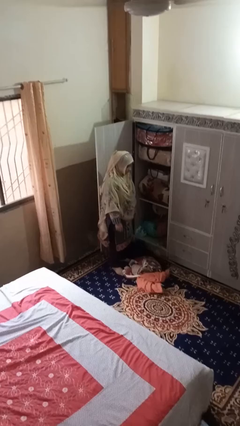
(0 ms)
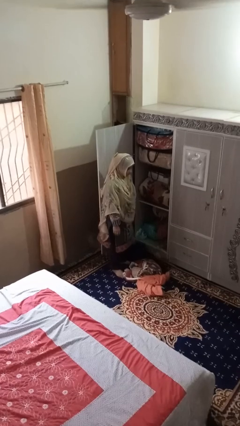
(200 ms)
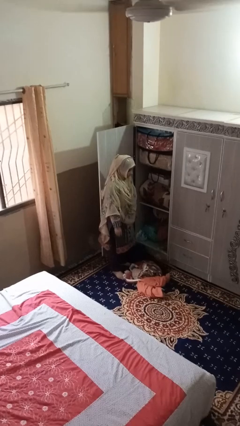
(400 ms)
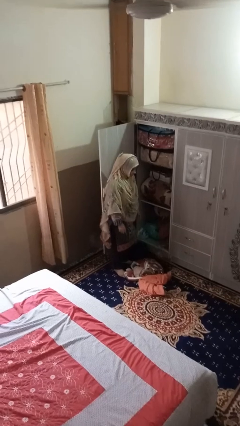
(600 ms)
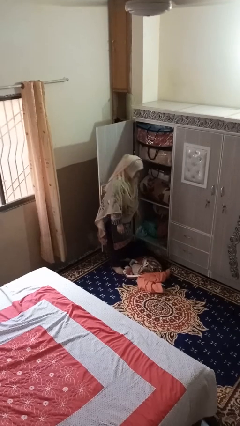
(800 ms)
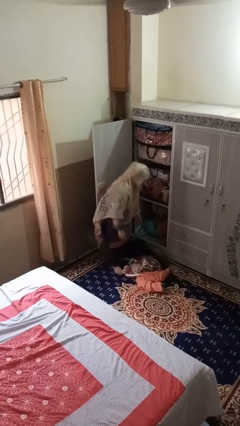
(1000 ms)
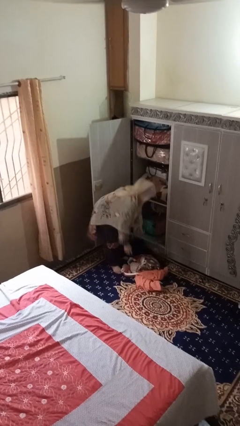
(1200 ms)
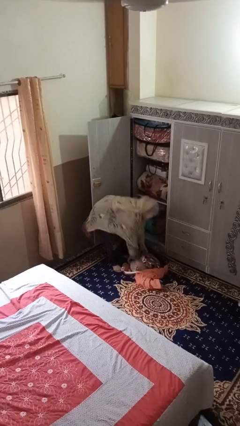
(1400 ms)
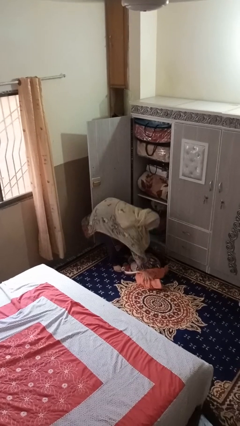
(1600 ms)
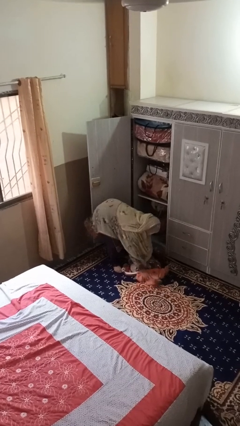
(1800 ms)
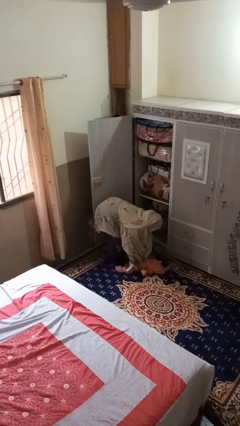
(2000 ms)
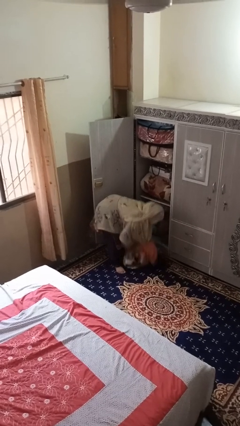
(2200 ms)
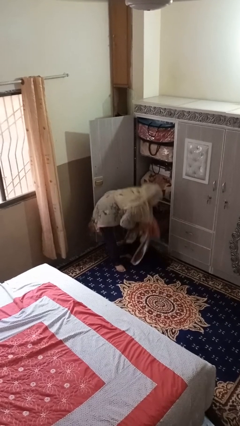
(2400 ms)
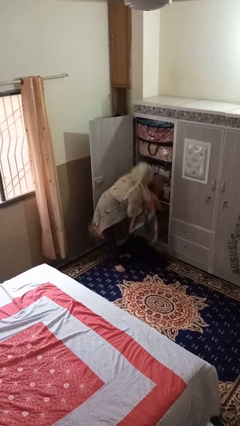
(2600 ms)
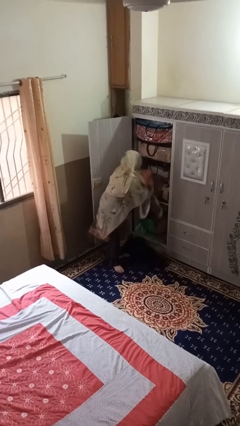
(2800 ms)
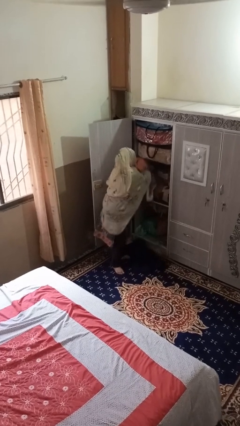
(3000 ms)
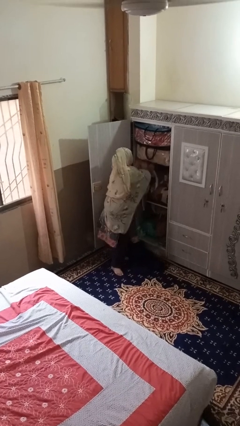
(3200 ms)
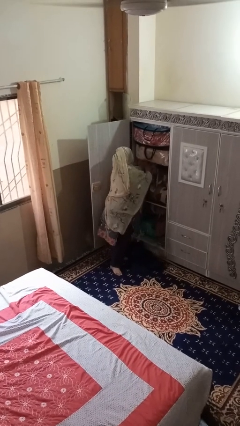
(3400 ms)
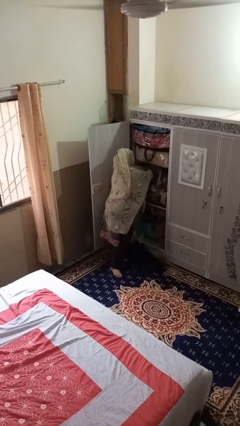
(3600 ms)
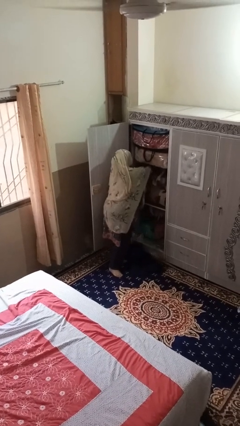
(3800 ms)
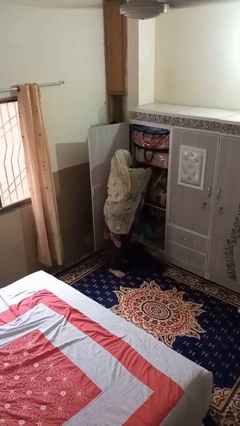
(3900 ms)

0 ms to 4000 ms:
person takes clothes from dresser

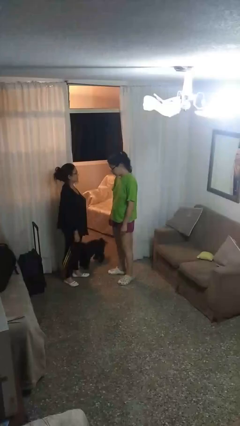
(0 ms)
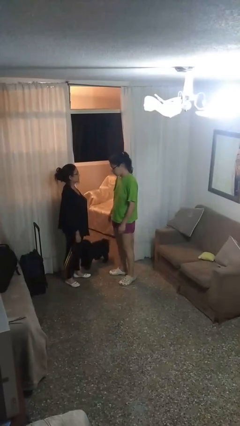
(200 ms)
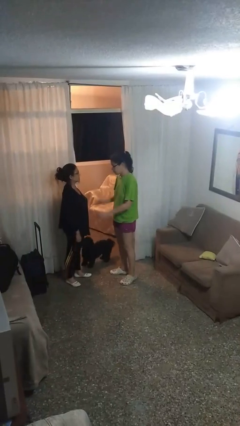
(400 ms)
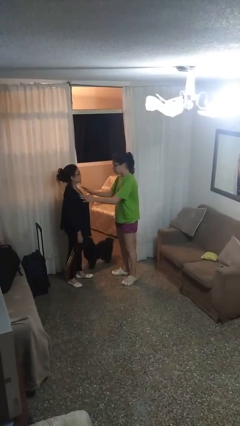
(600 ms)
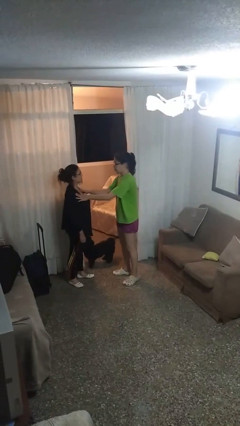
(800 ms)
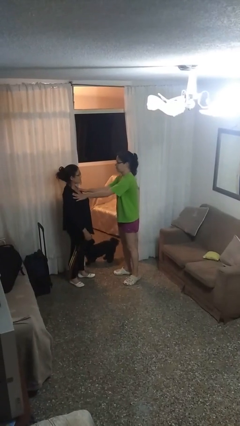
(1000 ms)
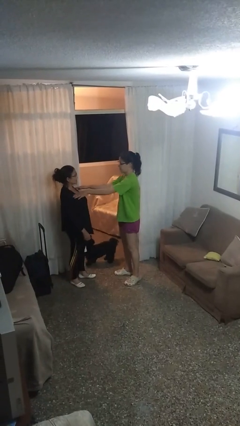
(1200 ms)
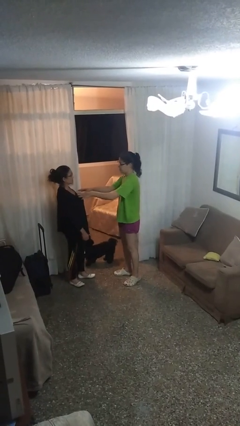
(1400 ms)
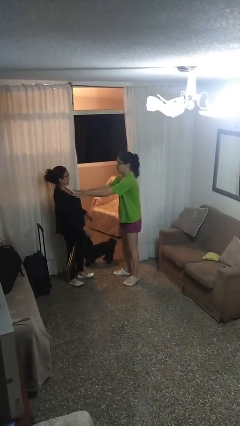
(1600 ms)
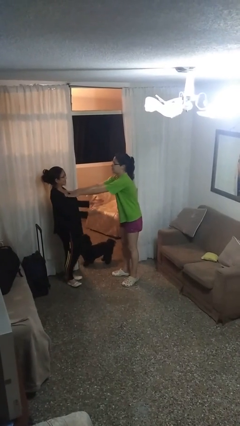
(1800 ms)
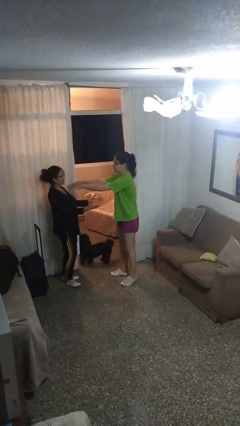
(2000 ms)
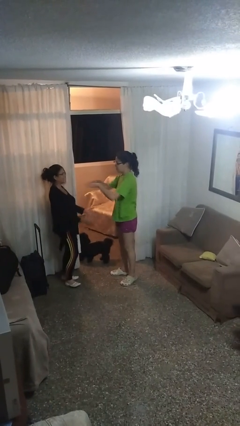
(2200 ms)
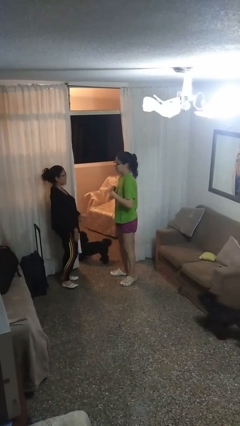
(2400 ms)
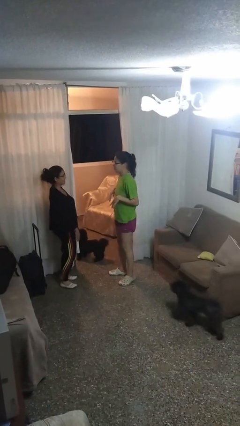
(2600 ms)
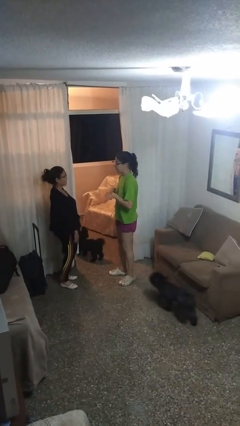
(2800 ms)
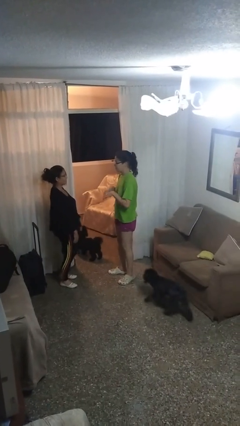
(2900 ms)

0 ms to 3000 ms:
person shoves person

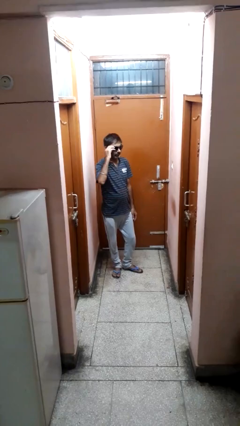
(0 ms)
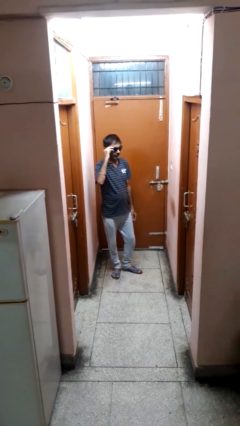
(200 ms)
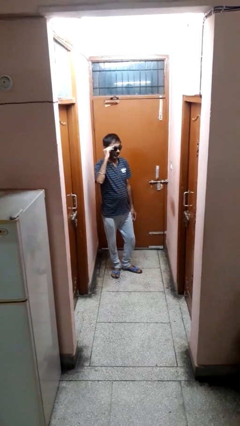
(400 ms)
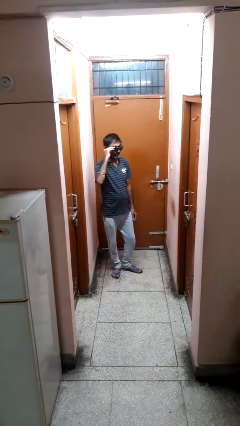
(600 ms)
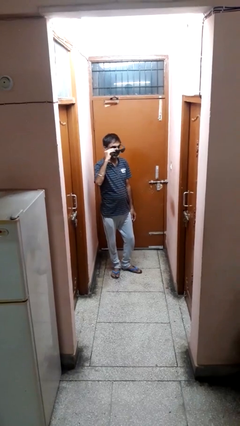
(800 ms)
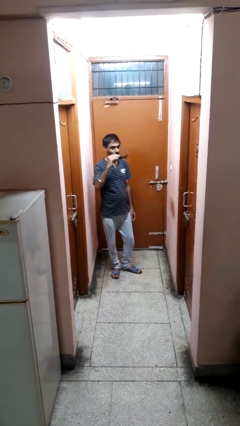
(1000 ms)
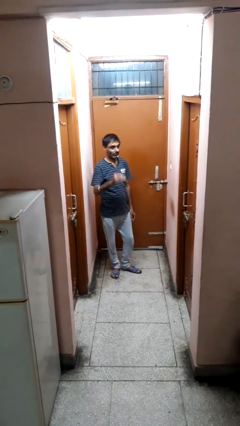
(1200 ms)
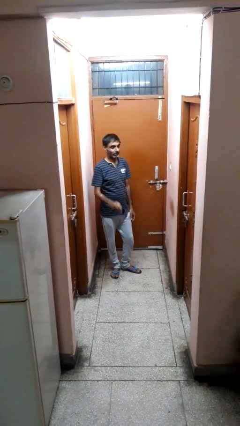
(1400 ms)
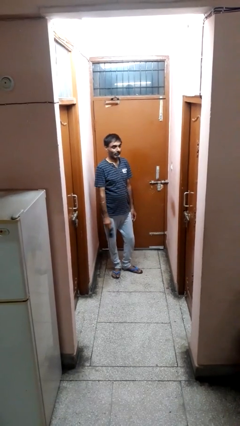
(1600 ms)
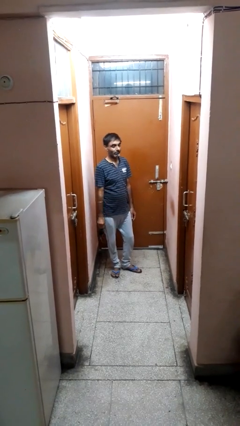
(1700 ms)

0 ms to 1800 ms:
person takes off sunglasses

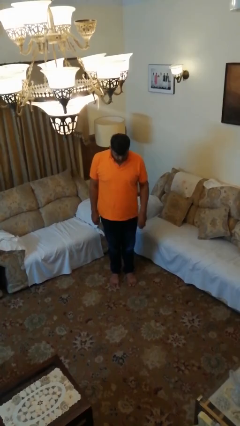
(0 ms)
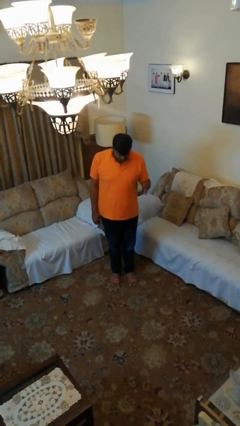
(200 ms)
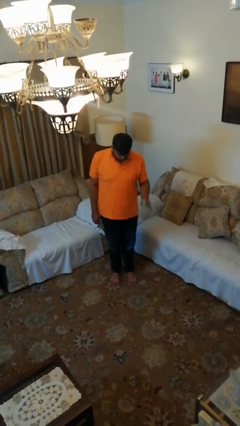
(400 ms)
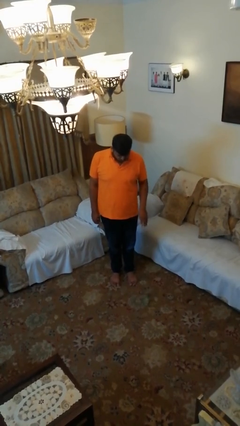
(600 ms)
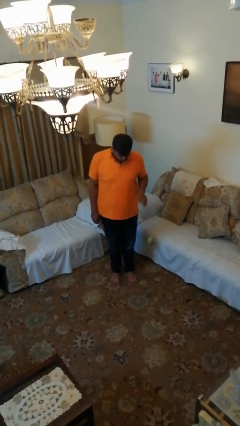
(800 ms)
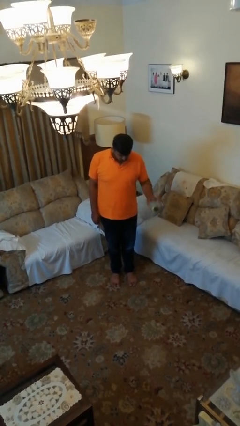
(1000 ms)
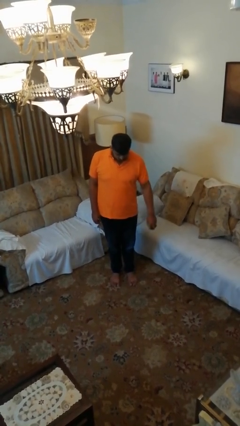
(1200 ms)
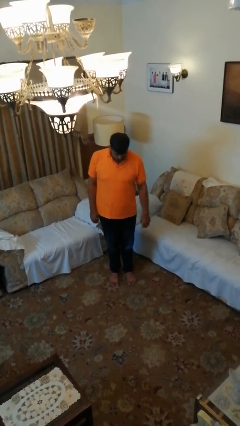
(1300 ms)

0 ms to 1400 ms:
person bounces ball on floor

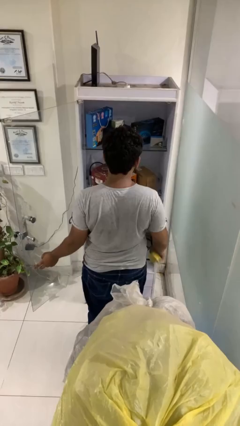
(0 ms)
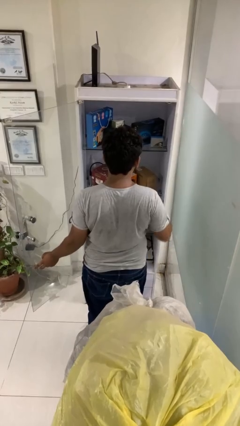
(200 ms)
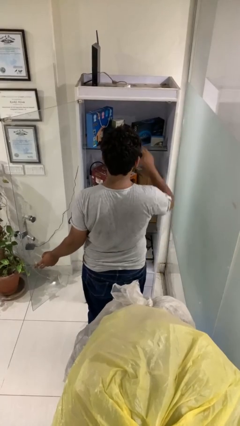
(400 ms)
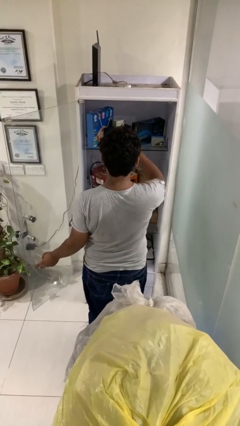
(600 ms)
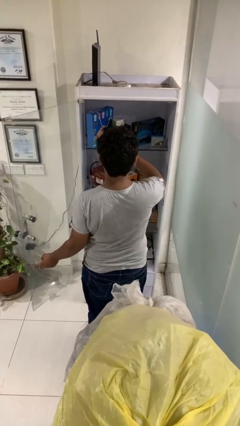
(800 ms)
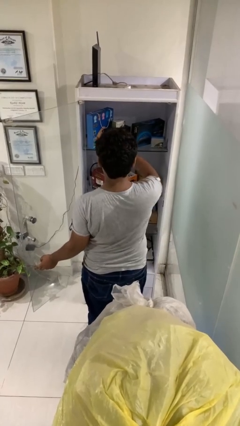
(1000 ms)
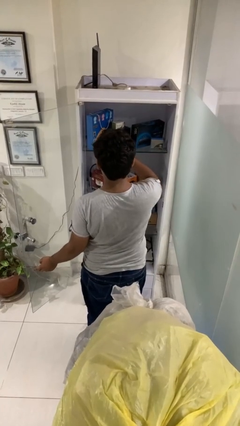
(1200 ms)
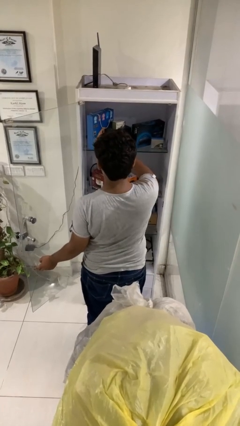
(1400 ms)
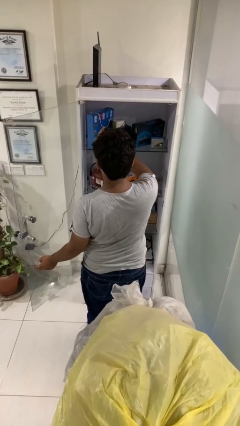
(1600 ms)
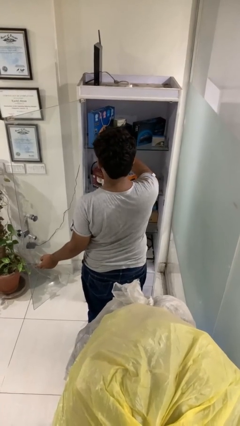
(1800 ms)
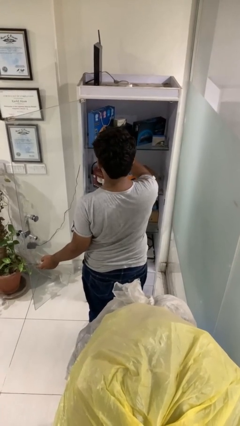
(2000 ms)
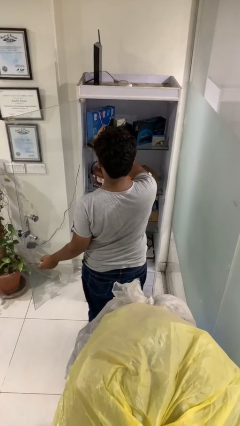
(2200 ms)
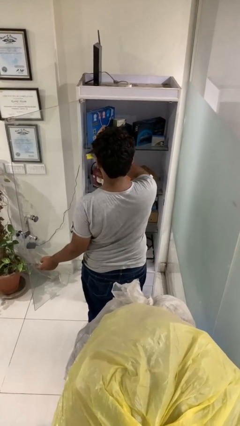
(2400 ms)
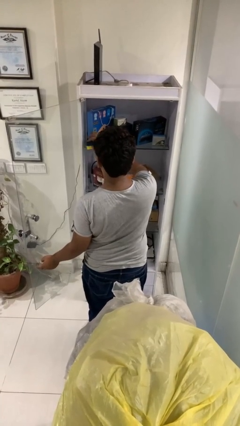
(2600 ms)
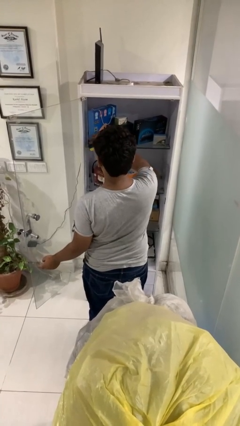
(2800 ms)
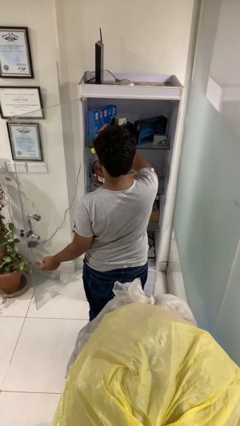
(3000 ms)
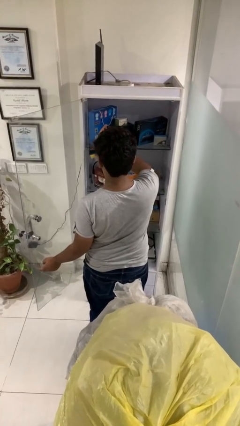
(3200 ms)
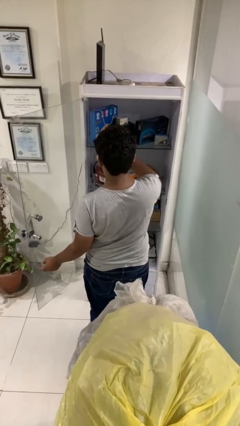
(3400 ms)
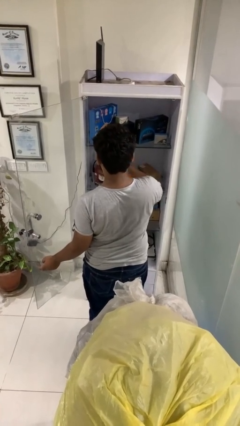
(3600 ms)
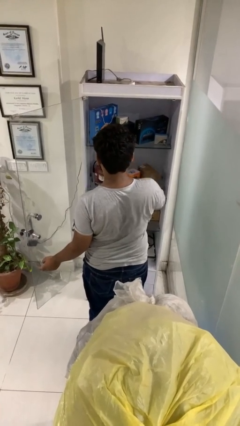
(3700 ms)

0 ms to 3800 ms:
person dusts furniture

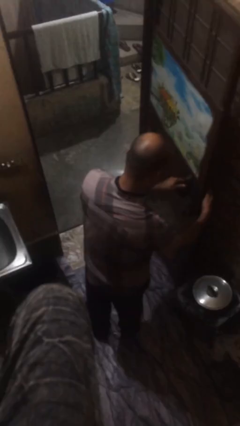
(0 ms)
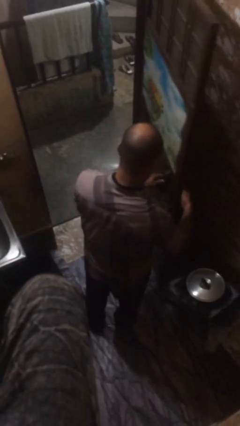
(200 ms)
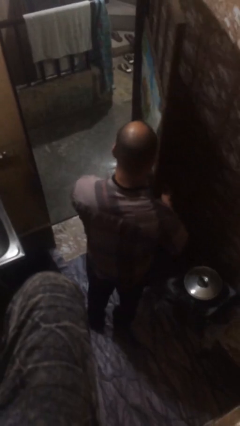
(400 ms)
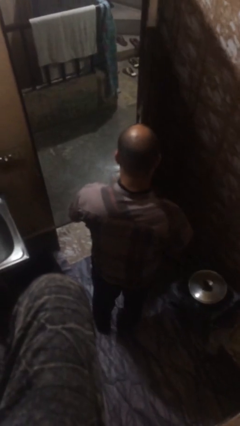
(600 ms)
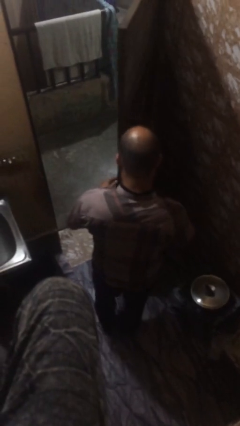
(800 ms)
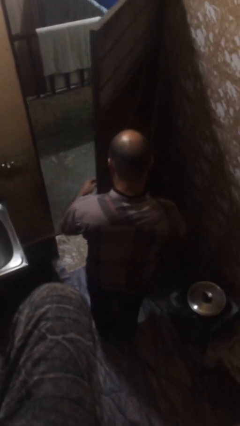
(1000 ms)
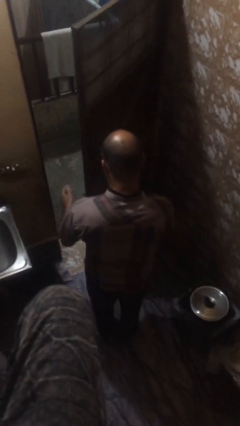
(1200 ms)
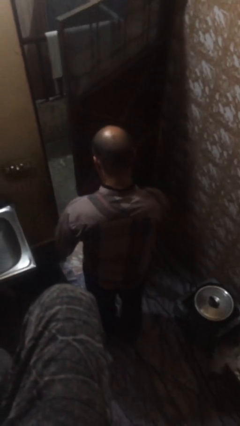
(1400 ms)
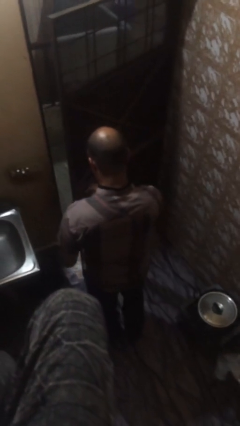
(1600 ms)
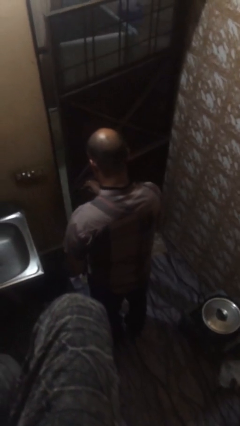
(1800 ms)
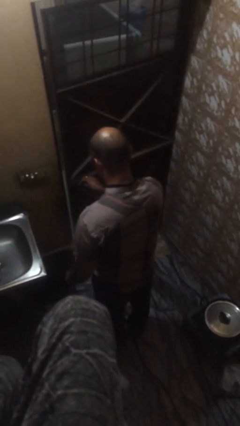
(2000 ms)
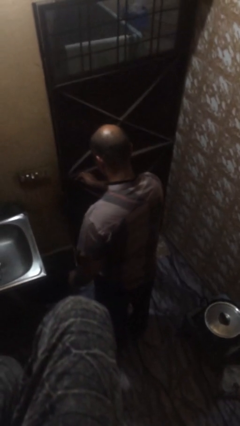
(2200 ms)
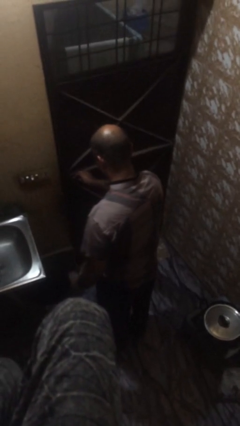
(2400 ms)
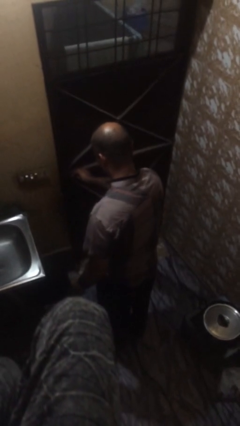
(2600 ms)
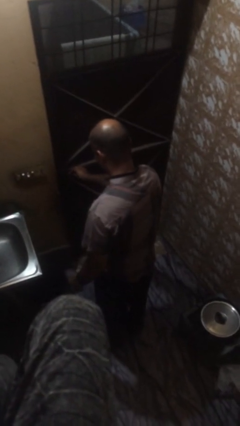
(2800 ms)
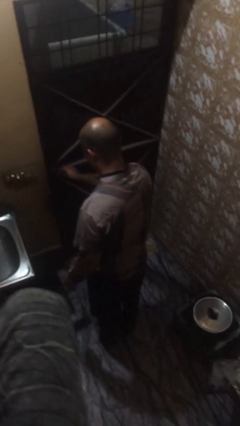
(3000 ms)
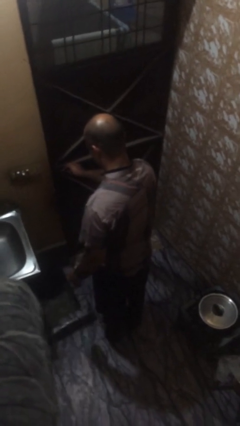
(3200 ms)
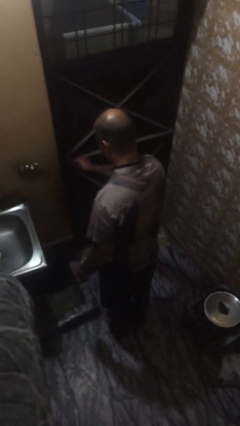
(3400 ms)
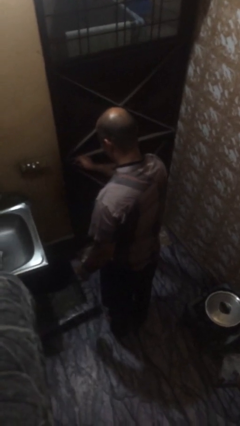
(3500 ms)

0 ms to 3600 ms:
person closes facility door
